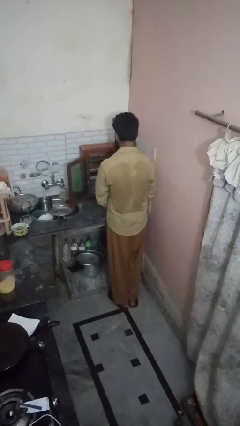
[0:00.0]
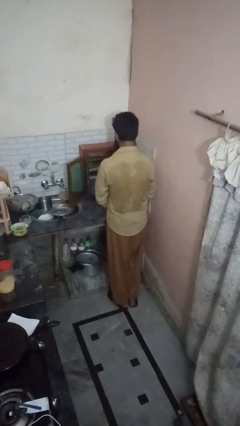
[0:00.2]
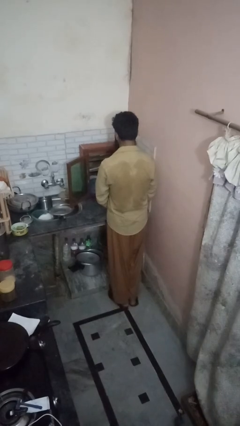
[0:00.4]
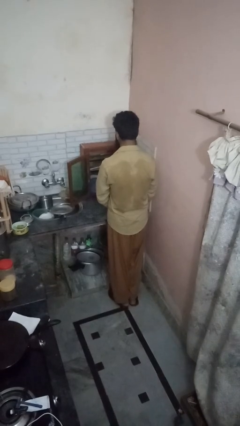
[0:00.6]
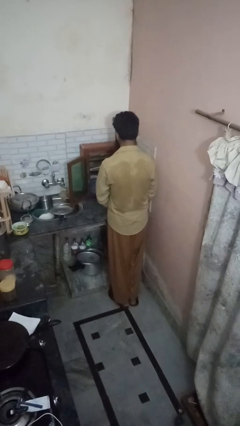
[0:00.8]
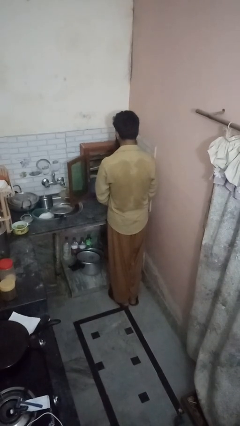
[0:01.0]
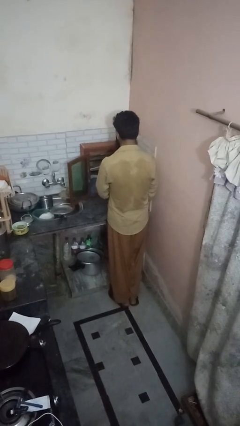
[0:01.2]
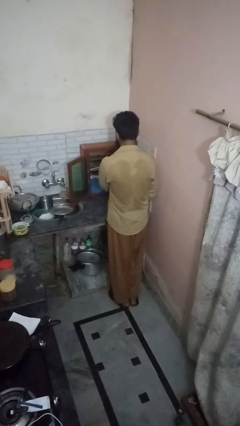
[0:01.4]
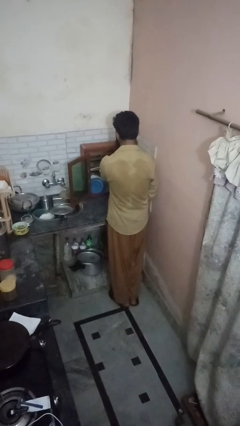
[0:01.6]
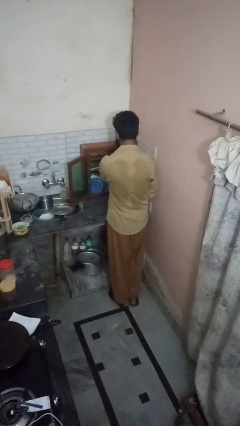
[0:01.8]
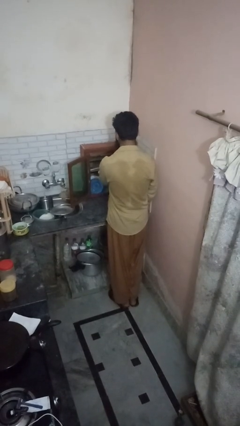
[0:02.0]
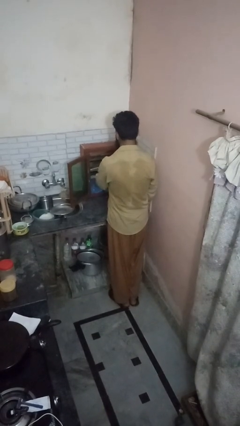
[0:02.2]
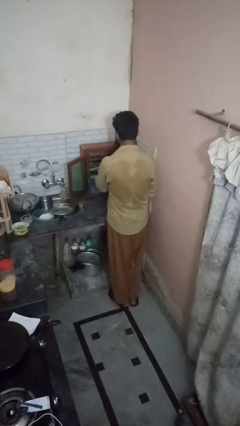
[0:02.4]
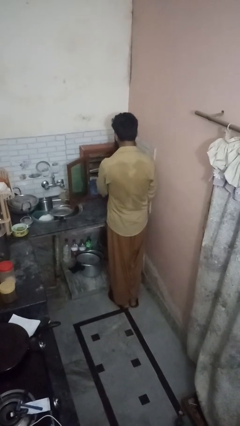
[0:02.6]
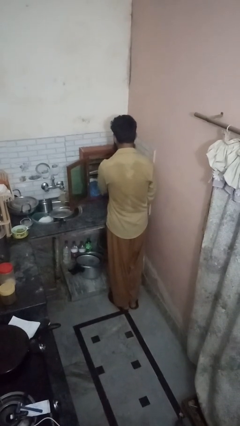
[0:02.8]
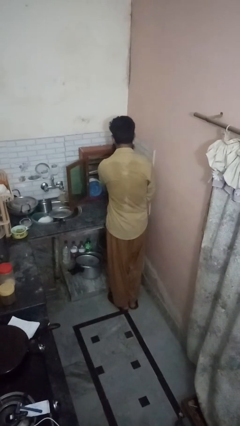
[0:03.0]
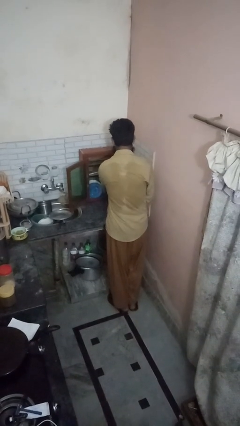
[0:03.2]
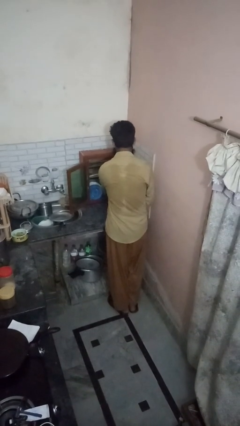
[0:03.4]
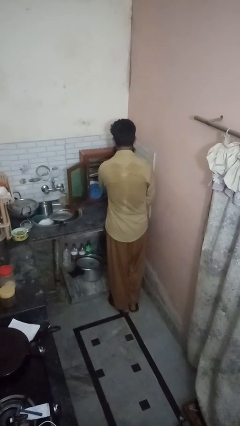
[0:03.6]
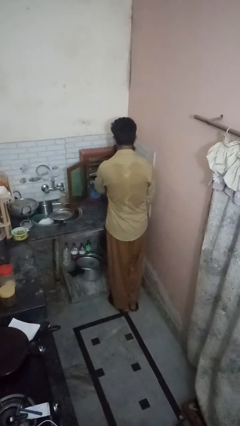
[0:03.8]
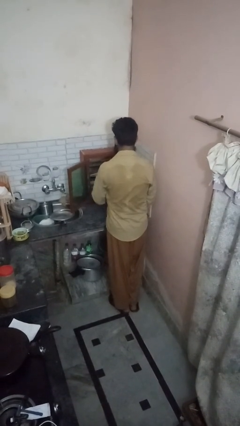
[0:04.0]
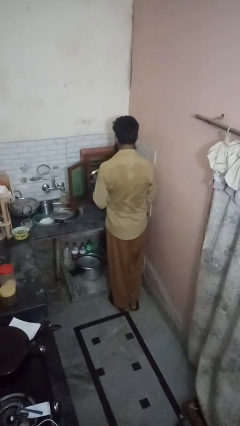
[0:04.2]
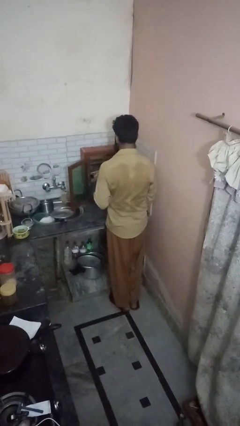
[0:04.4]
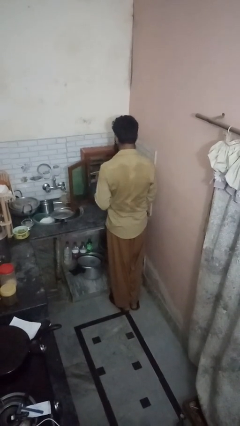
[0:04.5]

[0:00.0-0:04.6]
person puts object in cabinet

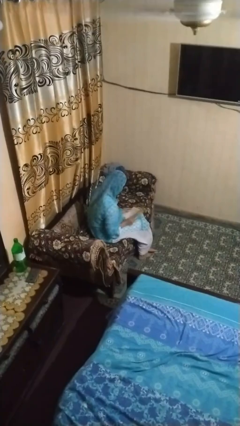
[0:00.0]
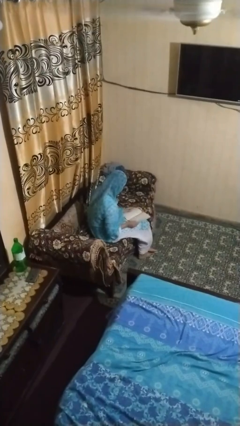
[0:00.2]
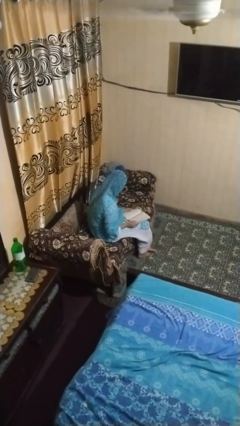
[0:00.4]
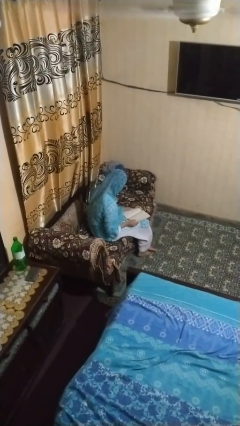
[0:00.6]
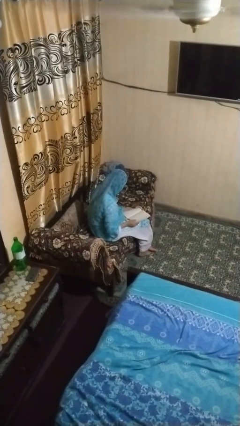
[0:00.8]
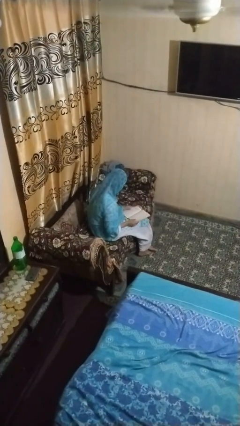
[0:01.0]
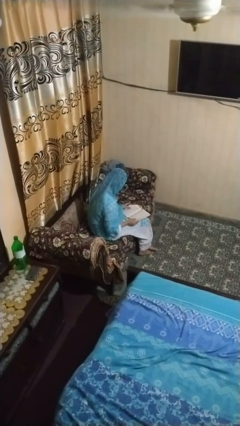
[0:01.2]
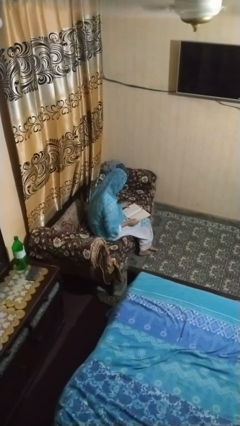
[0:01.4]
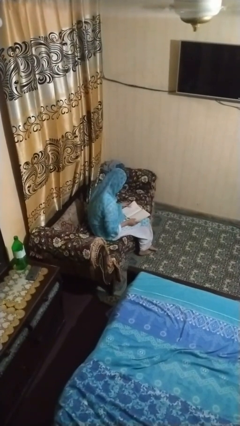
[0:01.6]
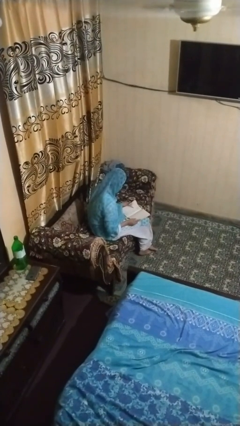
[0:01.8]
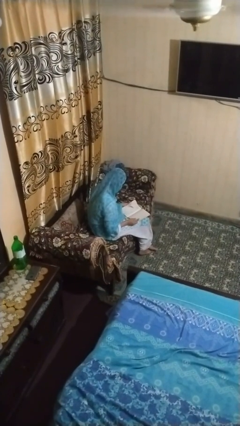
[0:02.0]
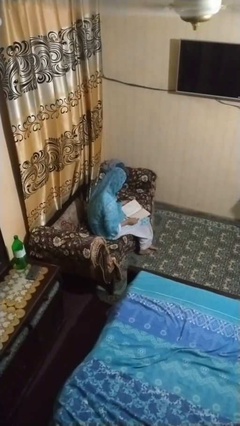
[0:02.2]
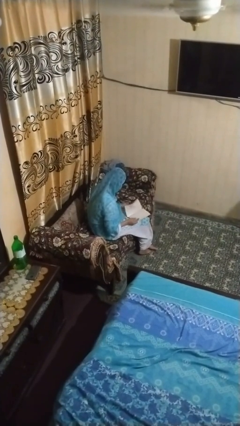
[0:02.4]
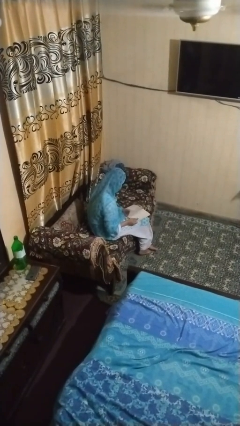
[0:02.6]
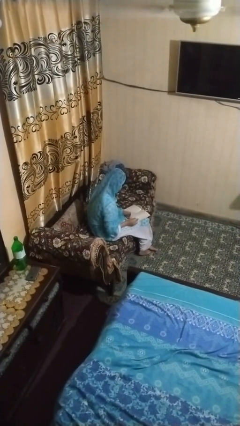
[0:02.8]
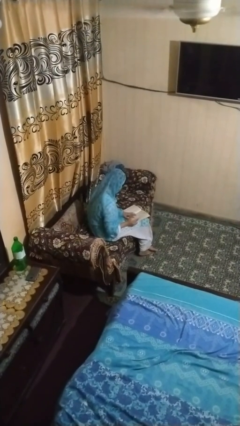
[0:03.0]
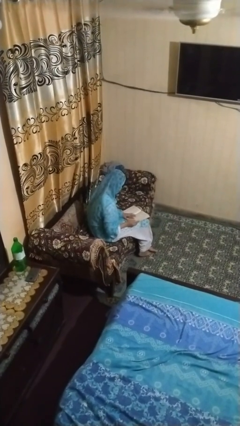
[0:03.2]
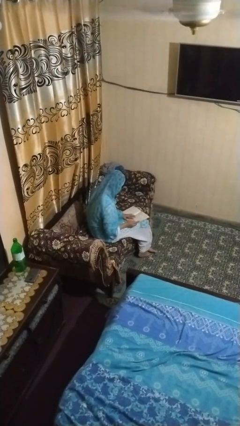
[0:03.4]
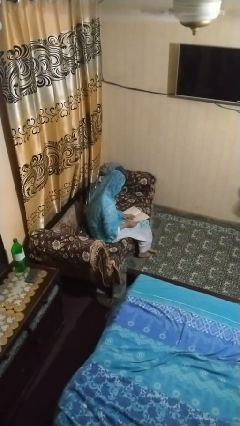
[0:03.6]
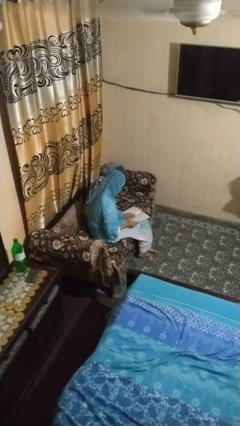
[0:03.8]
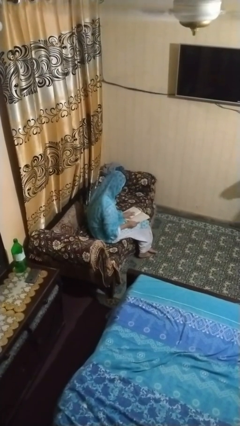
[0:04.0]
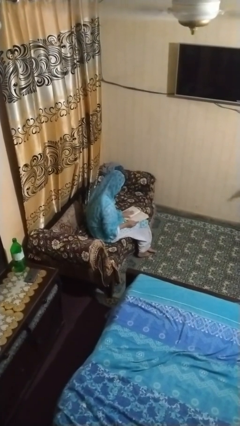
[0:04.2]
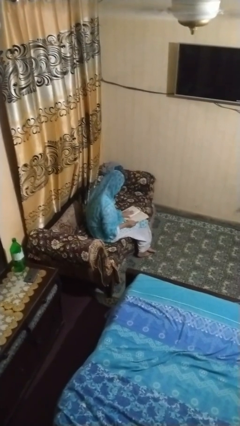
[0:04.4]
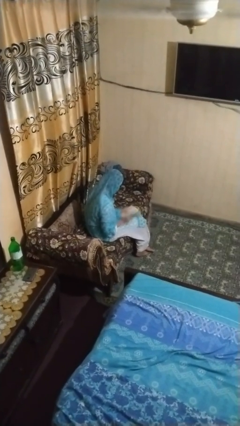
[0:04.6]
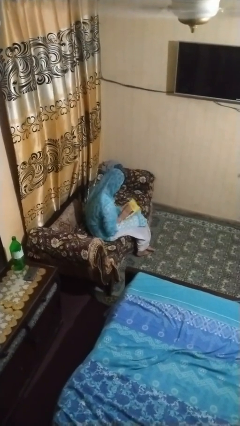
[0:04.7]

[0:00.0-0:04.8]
person reads book

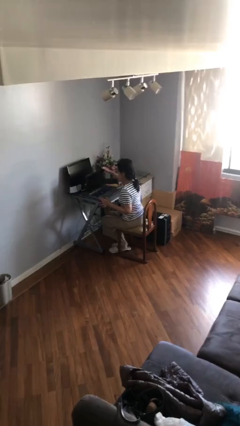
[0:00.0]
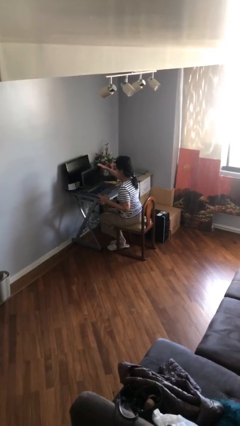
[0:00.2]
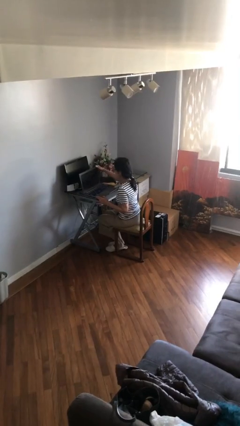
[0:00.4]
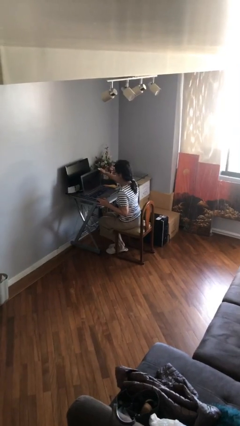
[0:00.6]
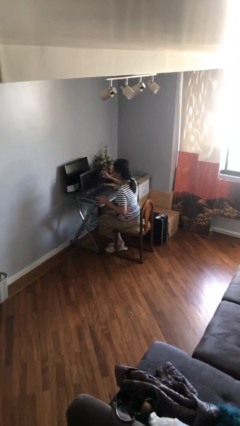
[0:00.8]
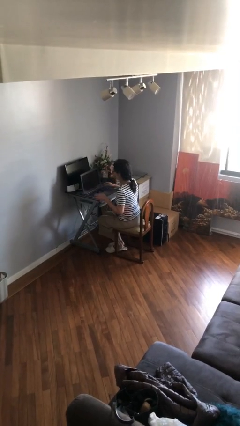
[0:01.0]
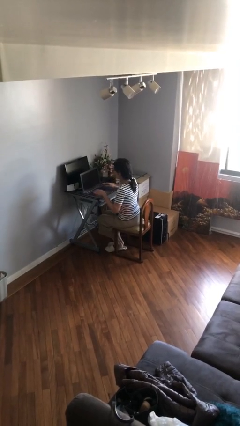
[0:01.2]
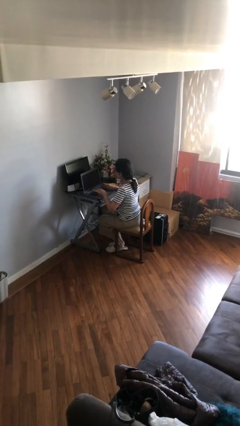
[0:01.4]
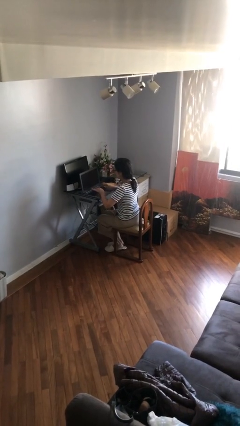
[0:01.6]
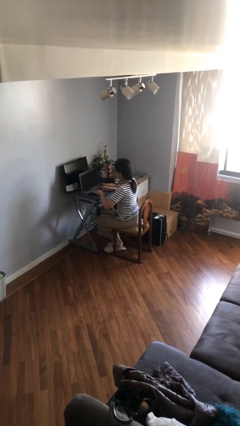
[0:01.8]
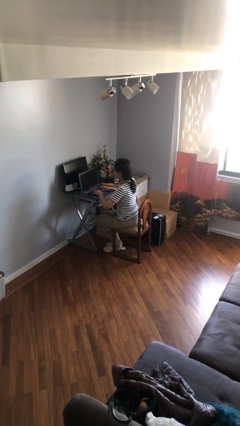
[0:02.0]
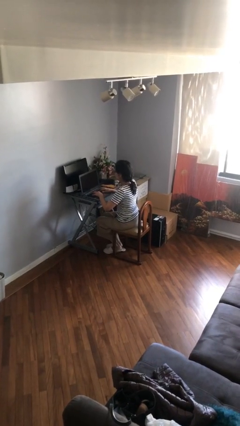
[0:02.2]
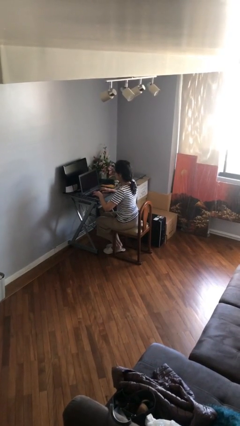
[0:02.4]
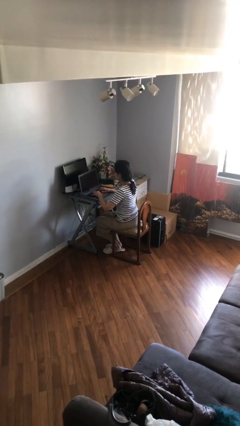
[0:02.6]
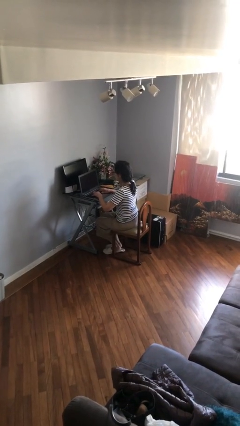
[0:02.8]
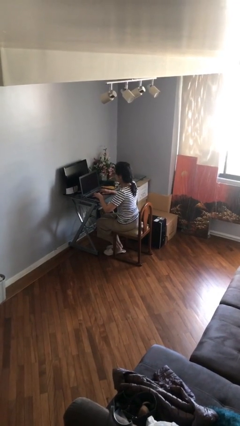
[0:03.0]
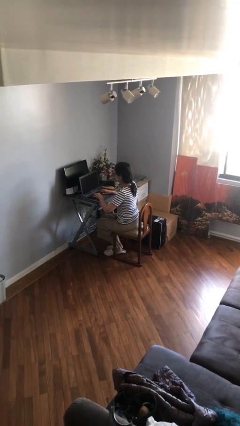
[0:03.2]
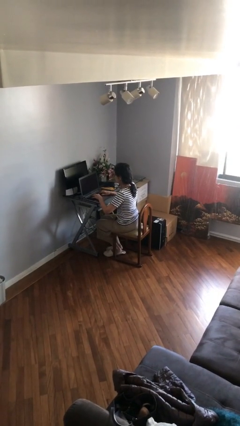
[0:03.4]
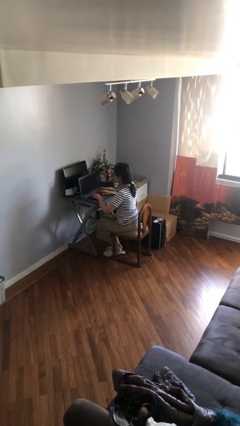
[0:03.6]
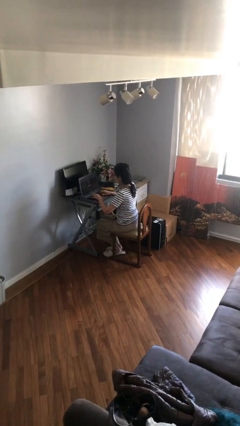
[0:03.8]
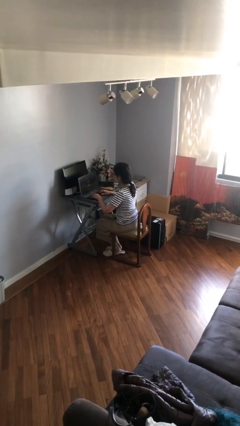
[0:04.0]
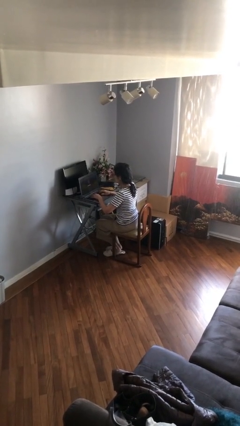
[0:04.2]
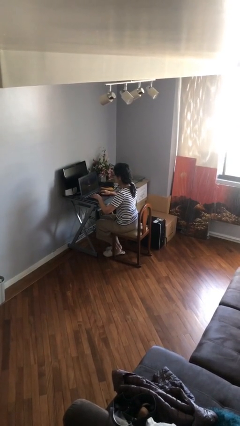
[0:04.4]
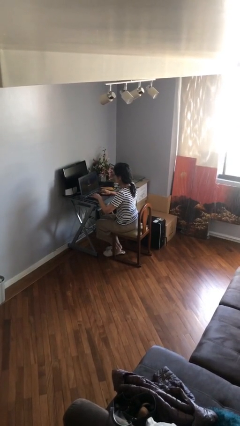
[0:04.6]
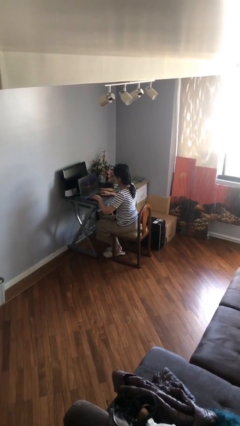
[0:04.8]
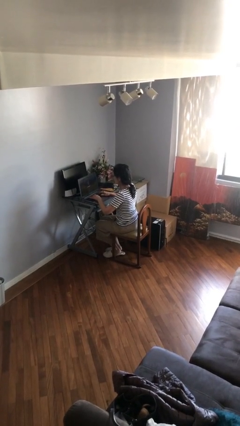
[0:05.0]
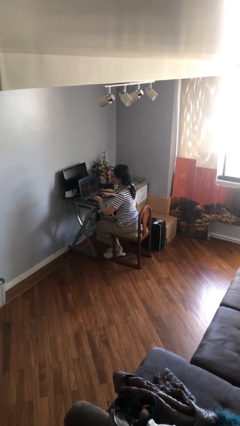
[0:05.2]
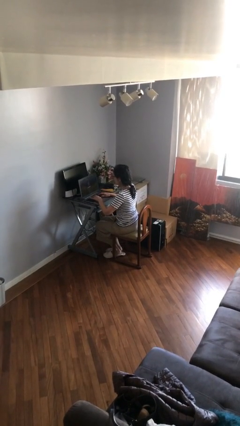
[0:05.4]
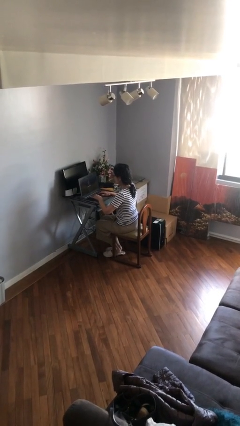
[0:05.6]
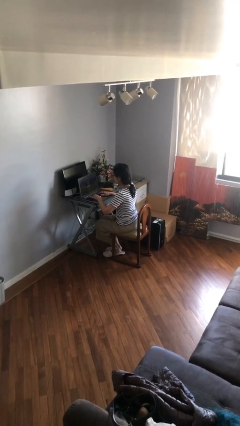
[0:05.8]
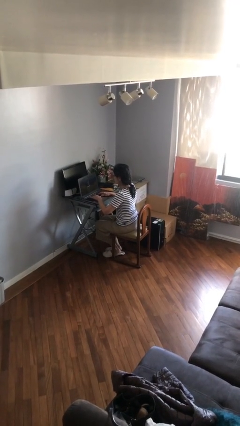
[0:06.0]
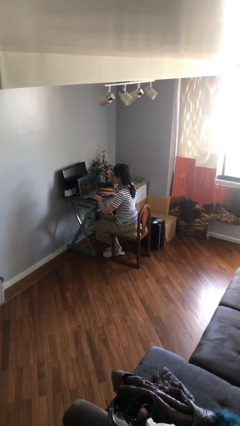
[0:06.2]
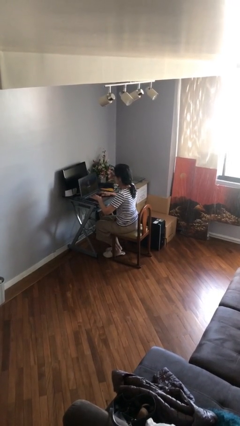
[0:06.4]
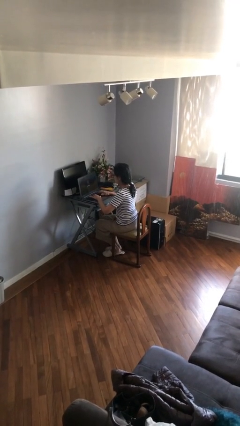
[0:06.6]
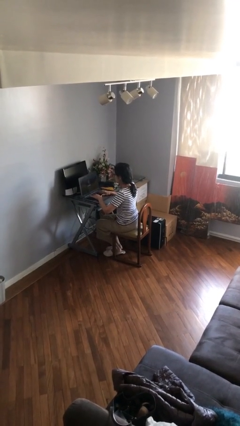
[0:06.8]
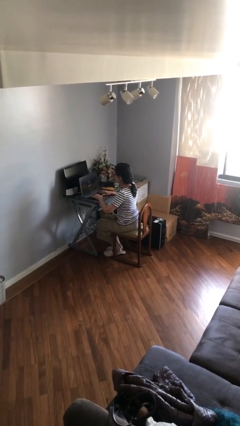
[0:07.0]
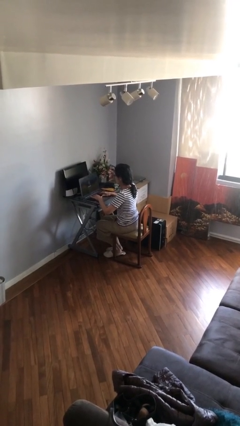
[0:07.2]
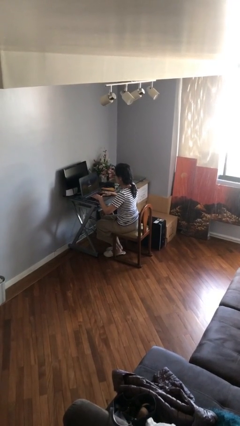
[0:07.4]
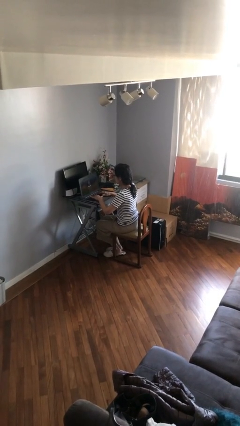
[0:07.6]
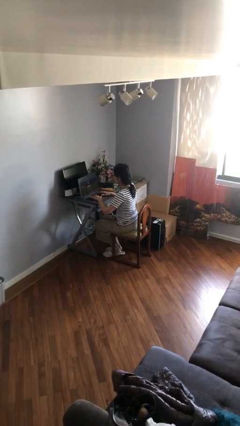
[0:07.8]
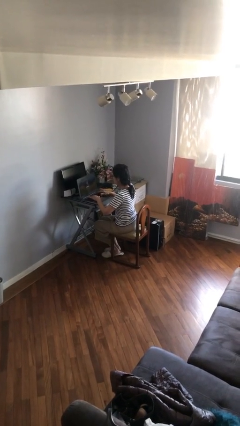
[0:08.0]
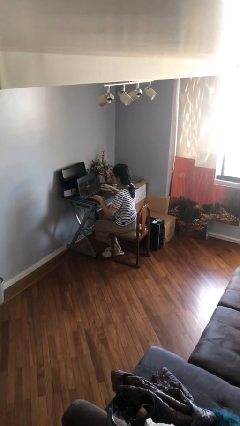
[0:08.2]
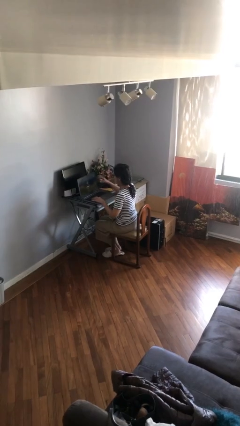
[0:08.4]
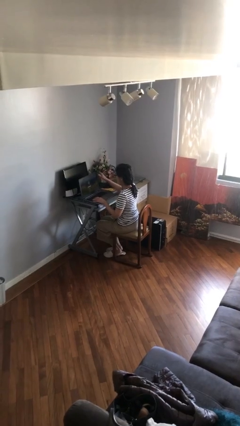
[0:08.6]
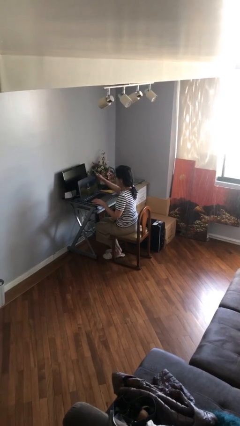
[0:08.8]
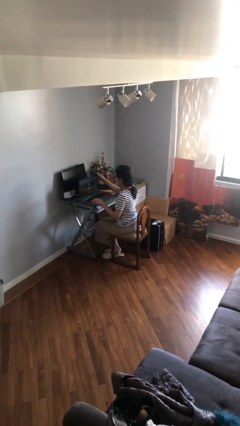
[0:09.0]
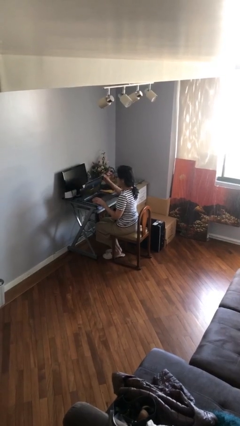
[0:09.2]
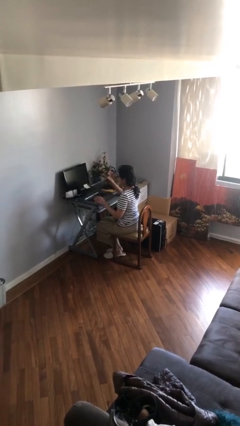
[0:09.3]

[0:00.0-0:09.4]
person interacts with laptop
